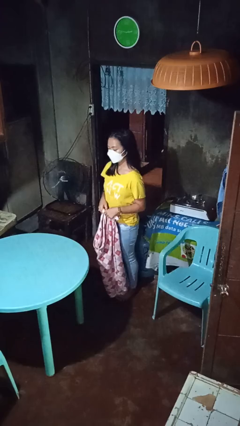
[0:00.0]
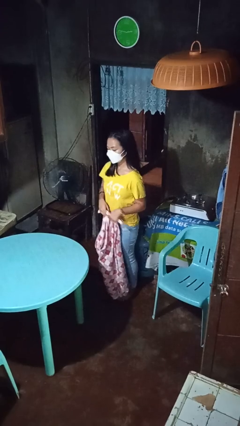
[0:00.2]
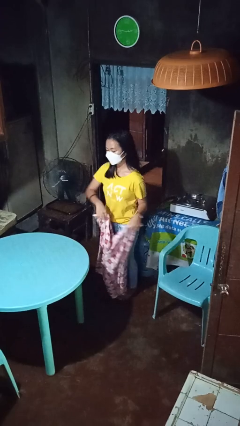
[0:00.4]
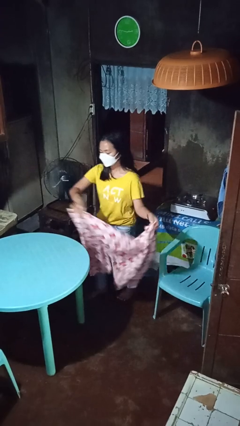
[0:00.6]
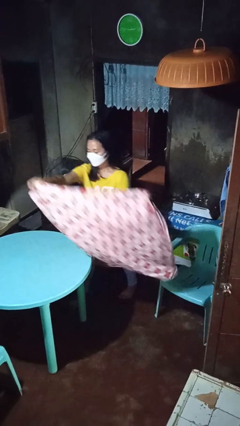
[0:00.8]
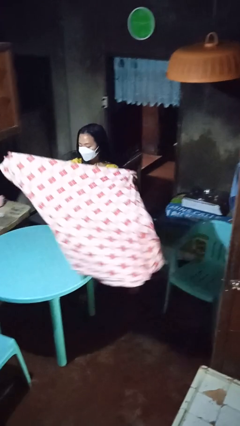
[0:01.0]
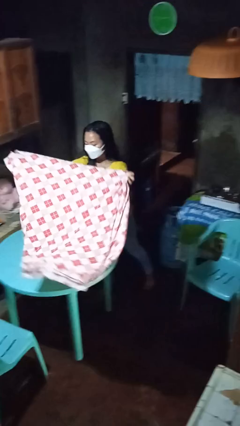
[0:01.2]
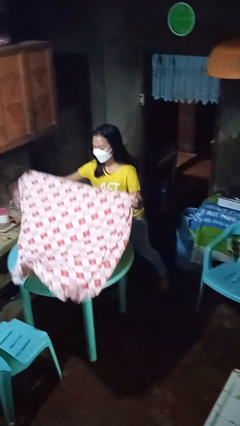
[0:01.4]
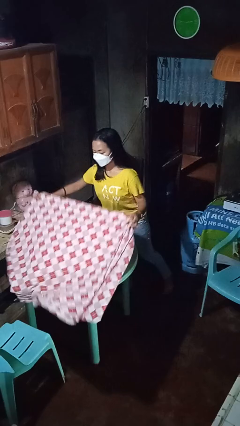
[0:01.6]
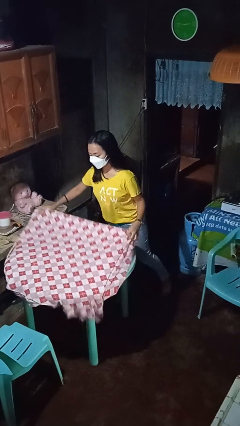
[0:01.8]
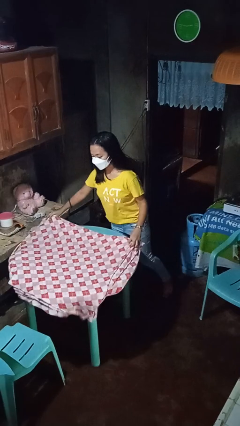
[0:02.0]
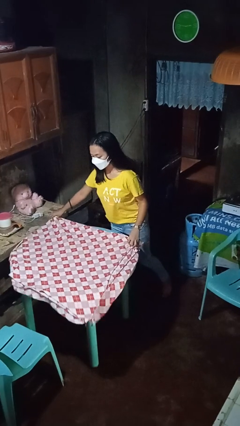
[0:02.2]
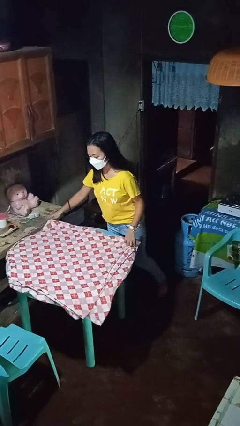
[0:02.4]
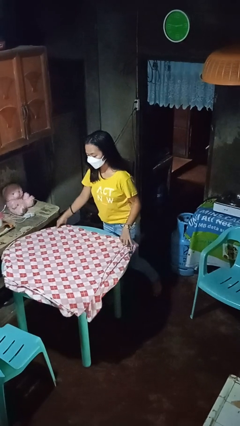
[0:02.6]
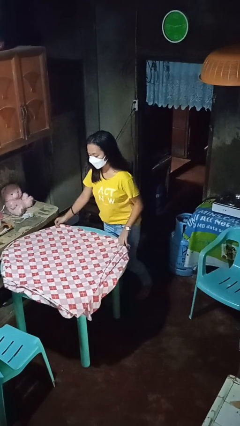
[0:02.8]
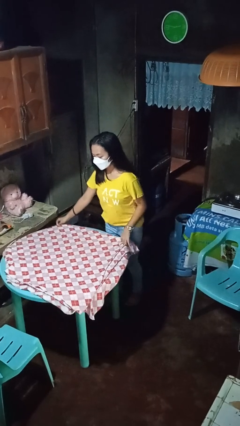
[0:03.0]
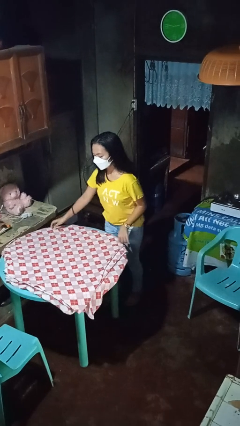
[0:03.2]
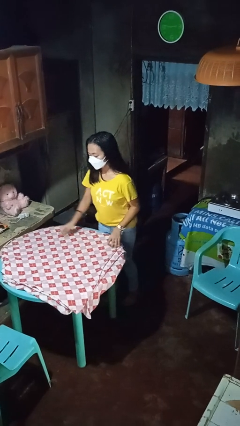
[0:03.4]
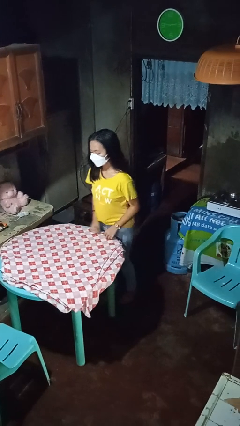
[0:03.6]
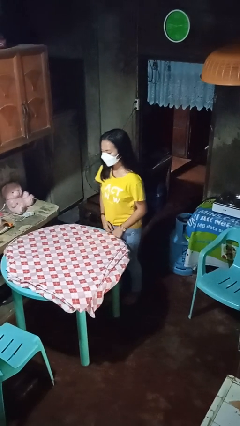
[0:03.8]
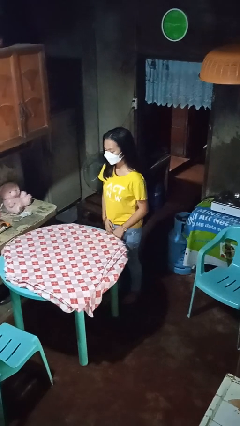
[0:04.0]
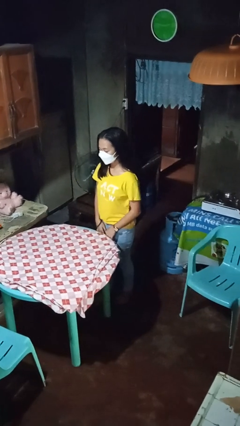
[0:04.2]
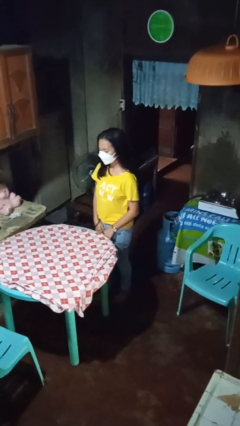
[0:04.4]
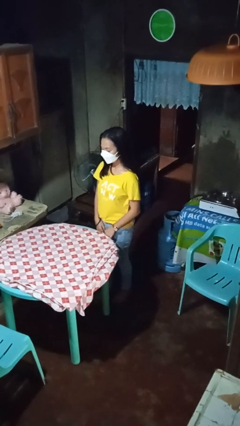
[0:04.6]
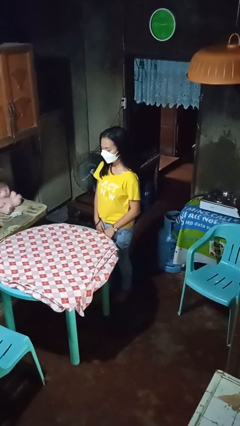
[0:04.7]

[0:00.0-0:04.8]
person spreads tablecloth

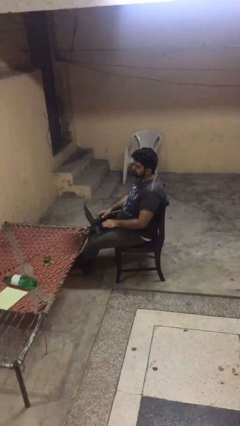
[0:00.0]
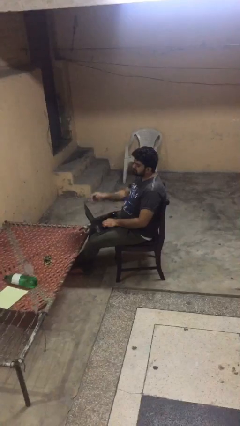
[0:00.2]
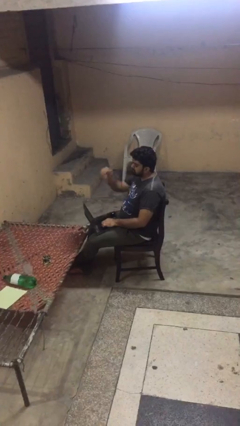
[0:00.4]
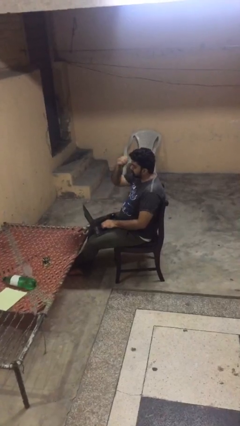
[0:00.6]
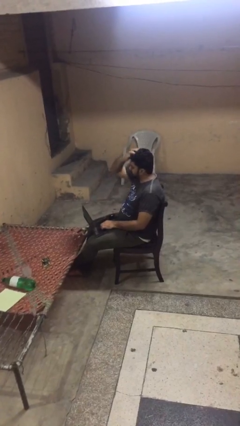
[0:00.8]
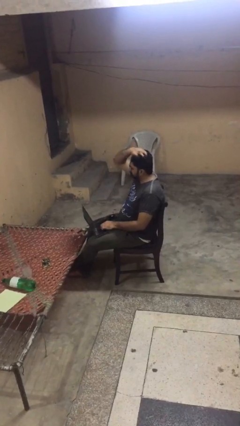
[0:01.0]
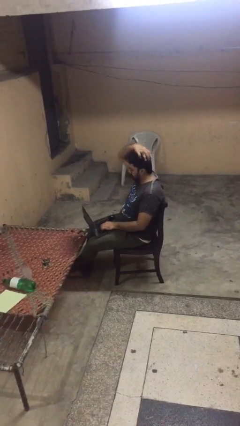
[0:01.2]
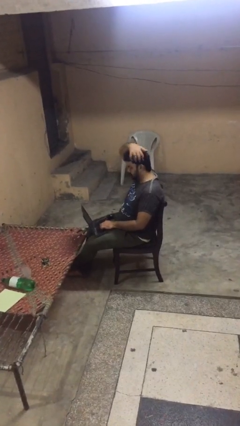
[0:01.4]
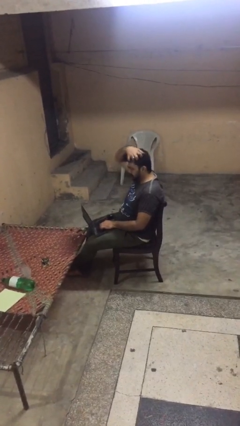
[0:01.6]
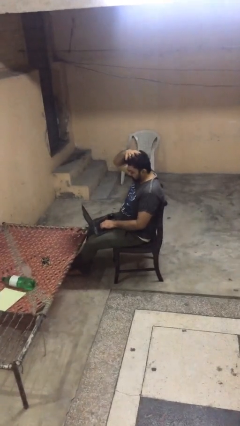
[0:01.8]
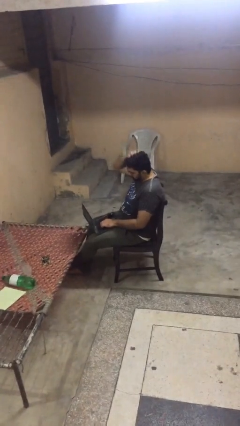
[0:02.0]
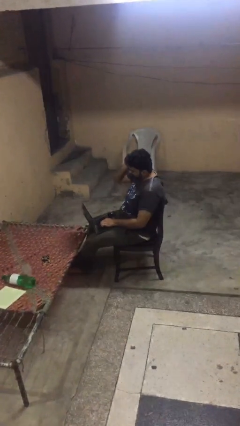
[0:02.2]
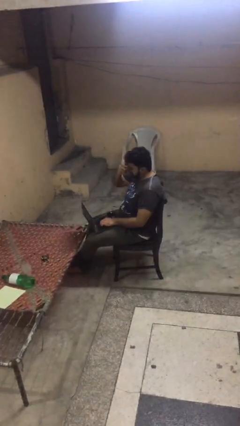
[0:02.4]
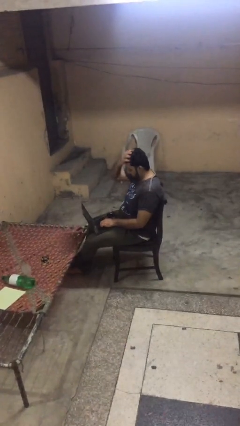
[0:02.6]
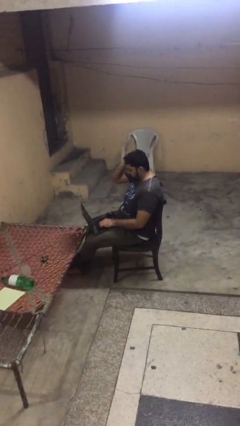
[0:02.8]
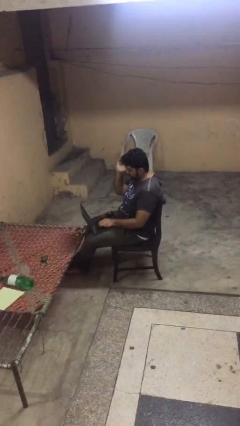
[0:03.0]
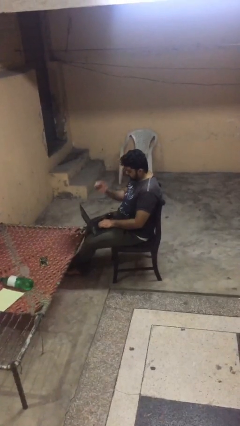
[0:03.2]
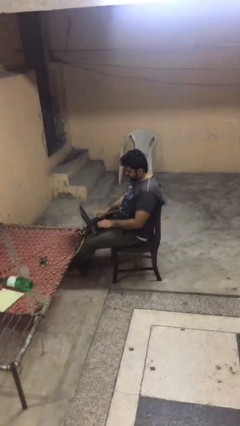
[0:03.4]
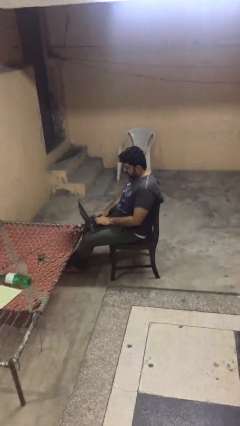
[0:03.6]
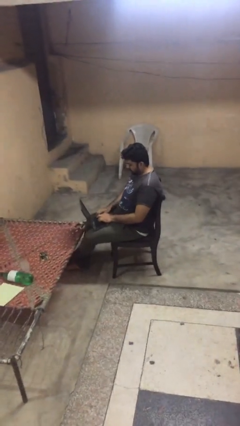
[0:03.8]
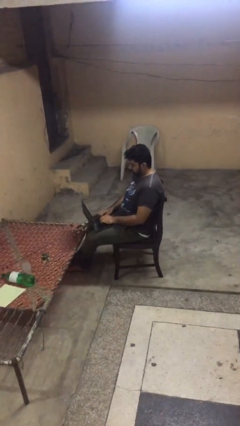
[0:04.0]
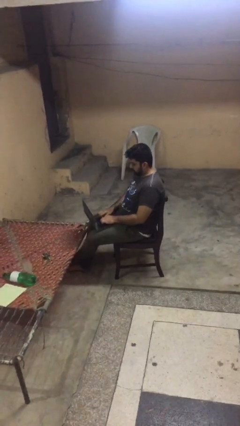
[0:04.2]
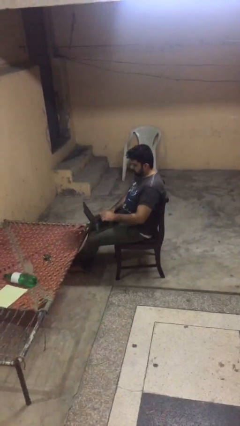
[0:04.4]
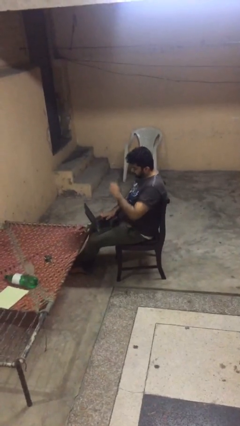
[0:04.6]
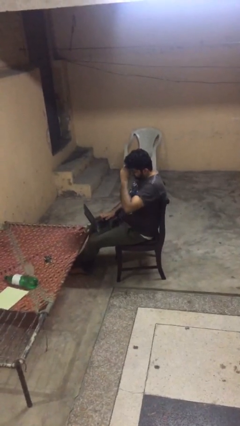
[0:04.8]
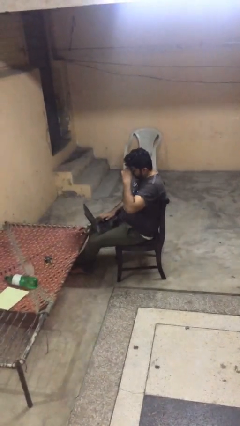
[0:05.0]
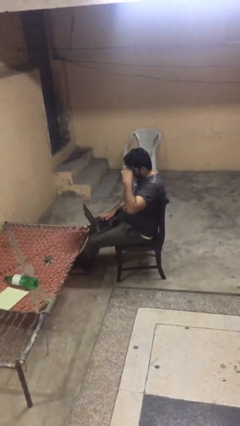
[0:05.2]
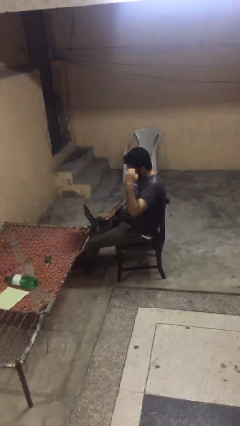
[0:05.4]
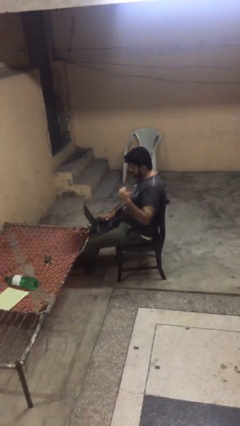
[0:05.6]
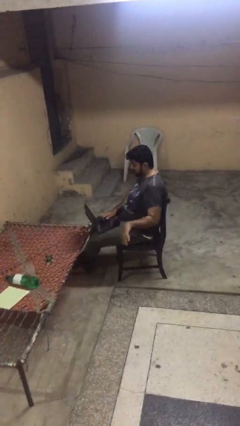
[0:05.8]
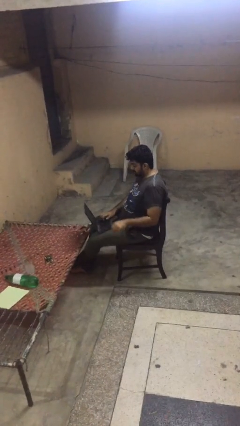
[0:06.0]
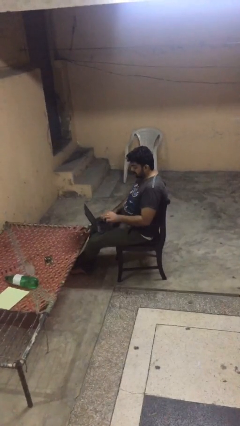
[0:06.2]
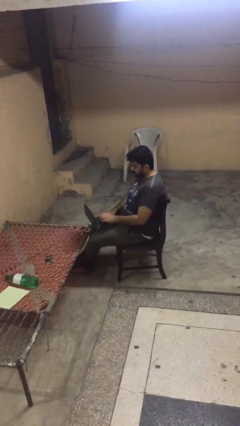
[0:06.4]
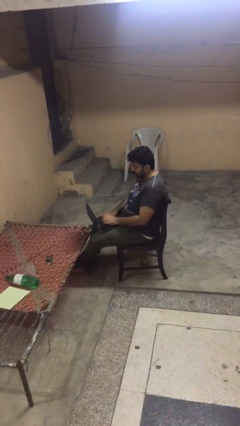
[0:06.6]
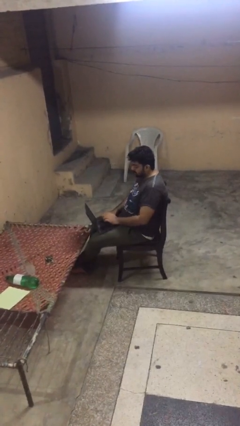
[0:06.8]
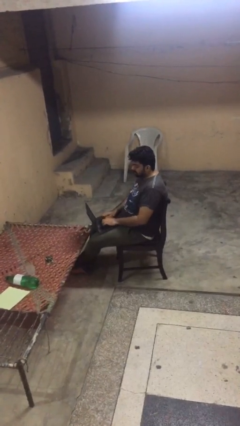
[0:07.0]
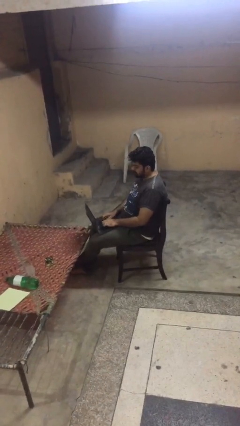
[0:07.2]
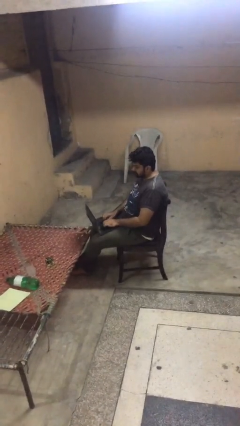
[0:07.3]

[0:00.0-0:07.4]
person interacts with laptop

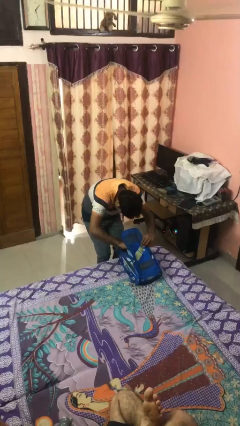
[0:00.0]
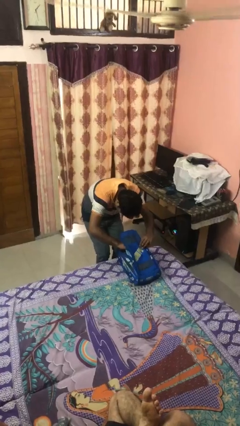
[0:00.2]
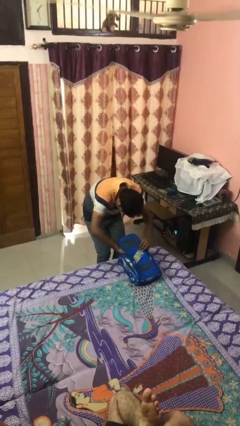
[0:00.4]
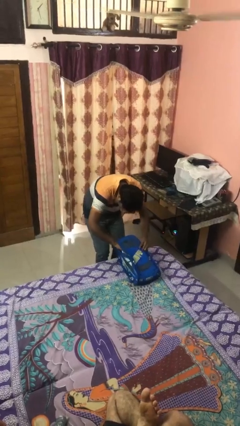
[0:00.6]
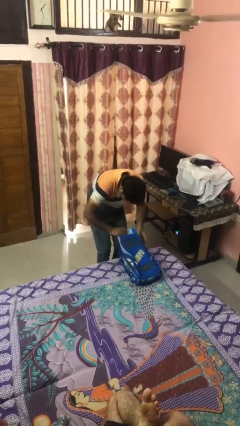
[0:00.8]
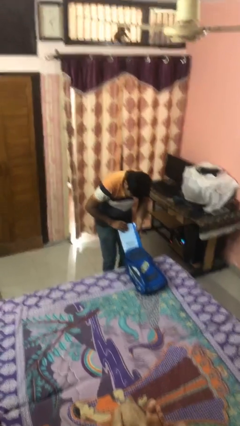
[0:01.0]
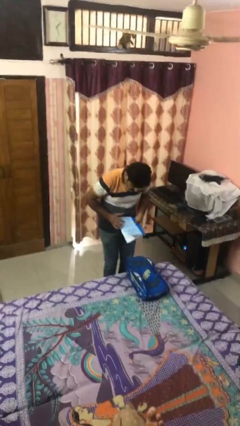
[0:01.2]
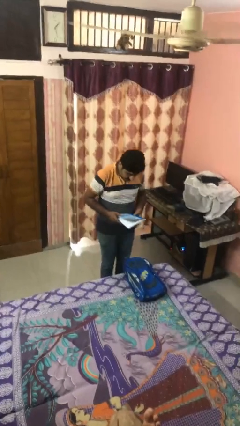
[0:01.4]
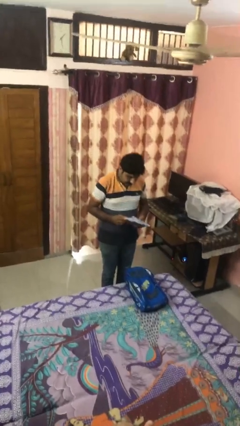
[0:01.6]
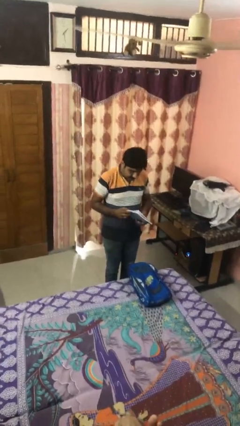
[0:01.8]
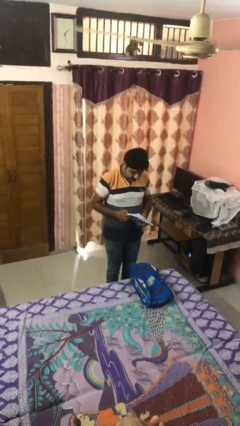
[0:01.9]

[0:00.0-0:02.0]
person takes object from backpack

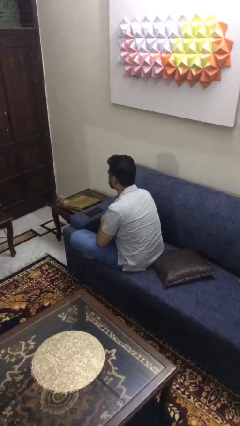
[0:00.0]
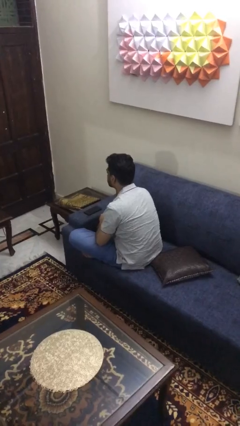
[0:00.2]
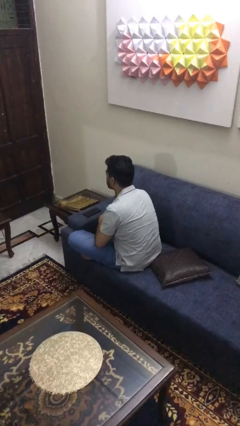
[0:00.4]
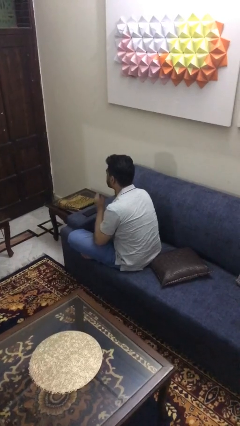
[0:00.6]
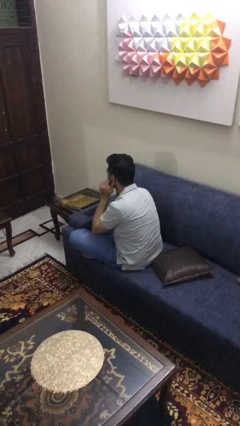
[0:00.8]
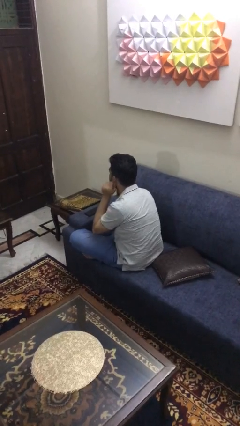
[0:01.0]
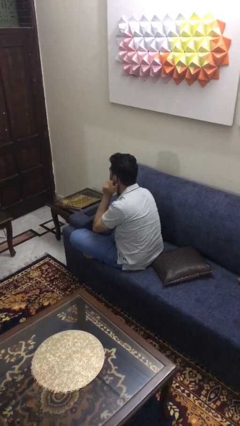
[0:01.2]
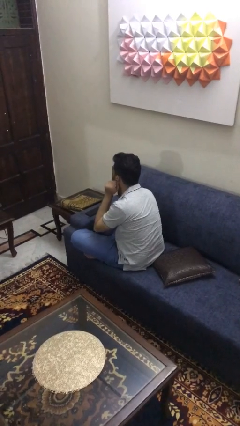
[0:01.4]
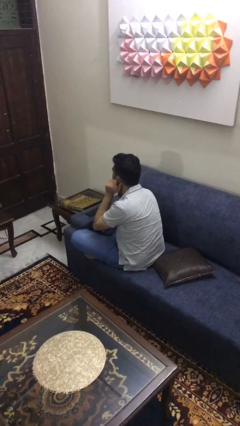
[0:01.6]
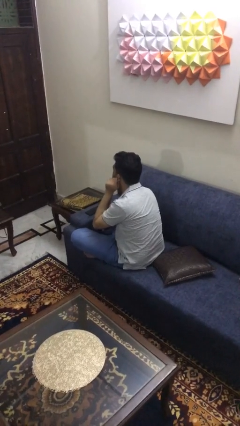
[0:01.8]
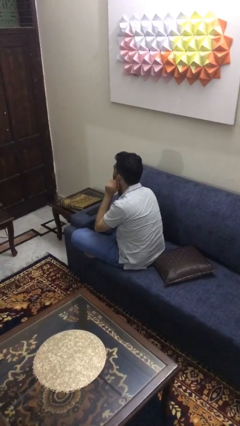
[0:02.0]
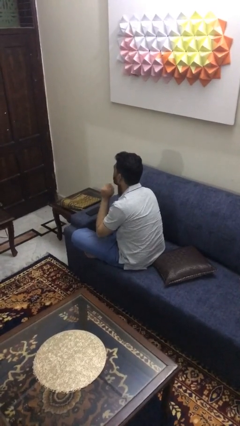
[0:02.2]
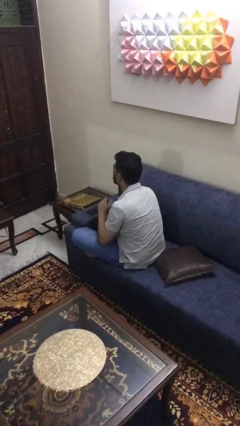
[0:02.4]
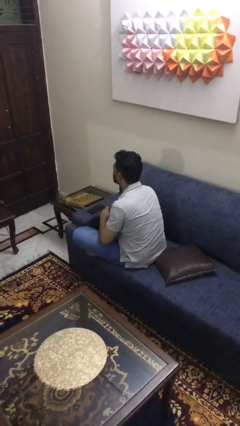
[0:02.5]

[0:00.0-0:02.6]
person touches earlobe

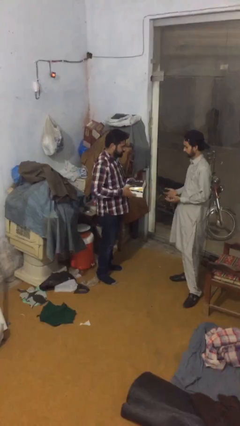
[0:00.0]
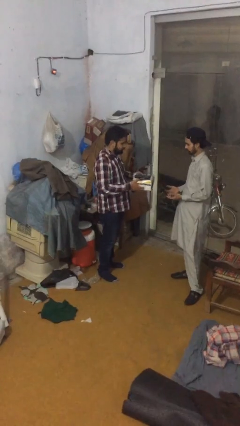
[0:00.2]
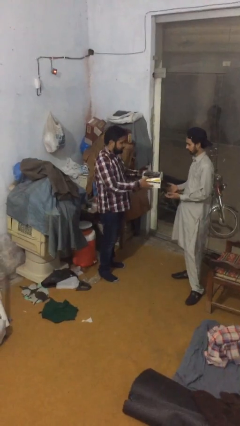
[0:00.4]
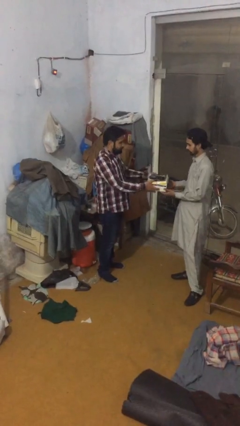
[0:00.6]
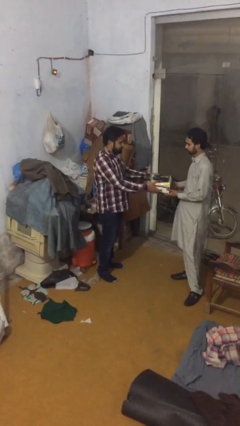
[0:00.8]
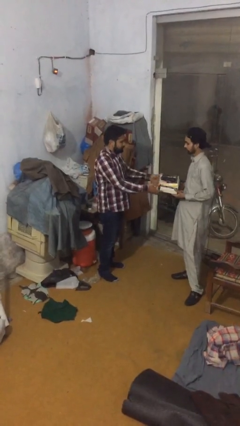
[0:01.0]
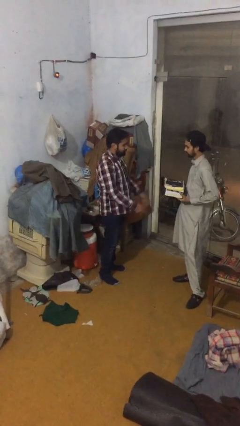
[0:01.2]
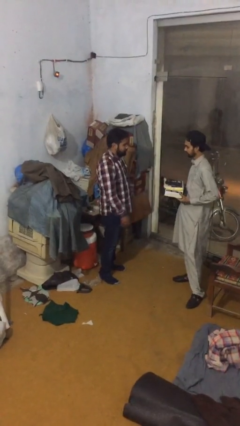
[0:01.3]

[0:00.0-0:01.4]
person transfers object to person
